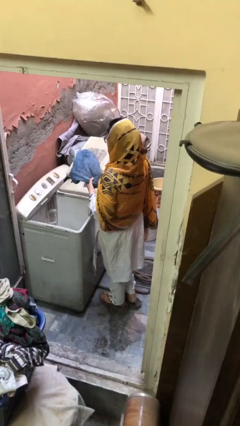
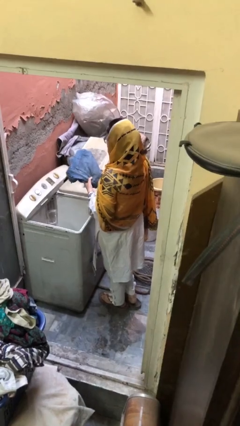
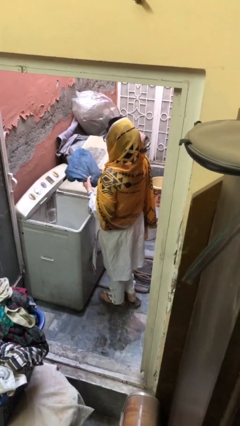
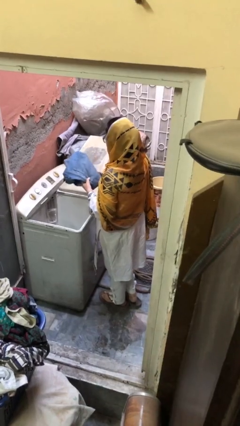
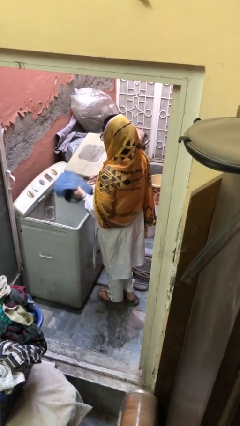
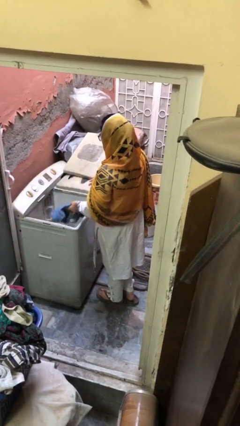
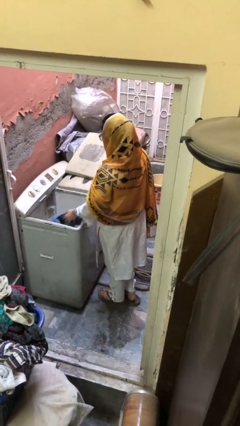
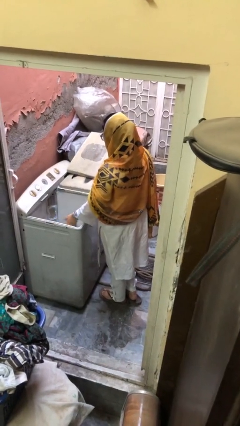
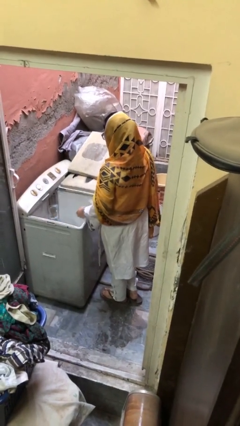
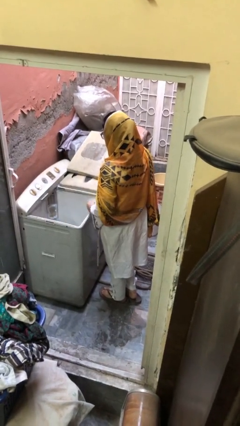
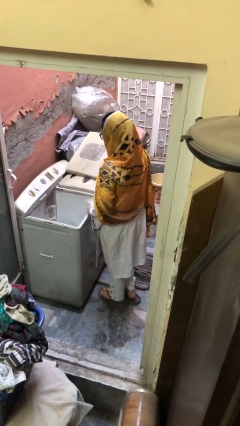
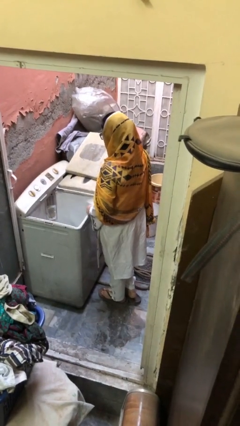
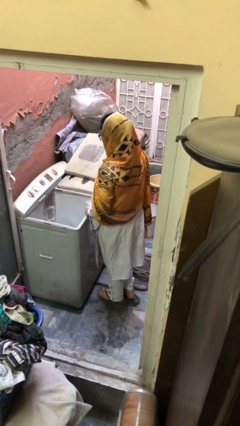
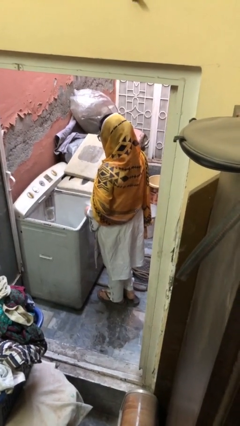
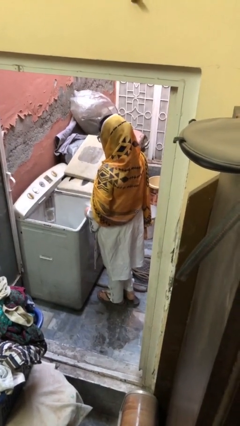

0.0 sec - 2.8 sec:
person loads clotheswasher

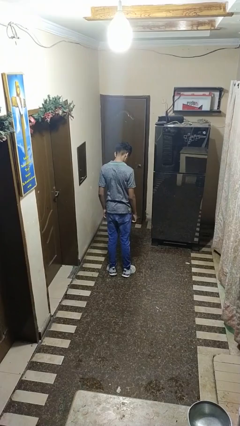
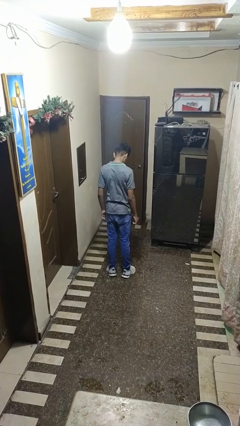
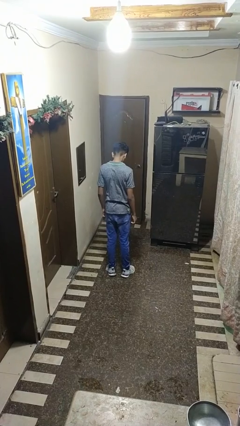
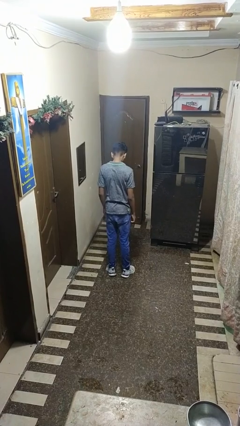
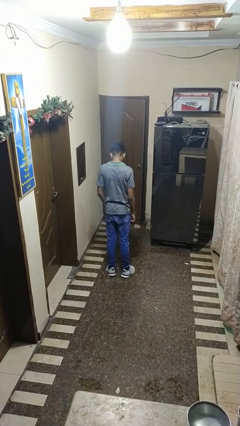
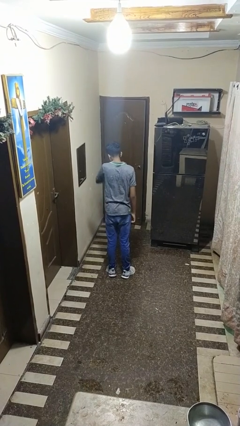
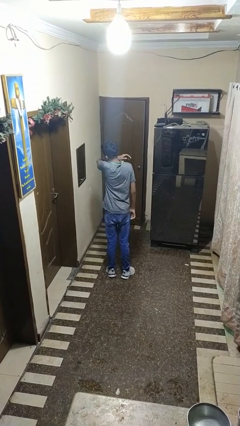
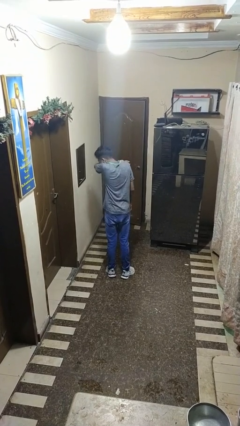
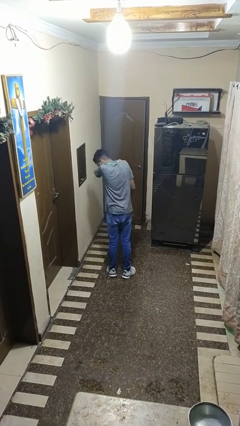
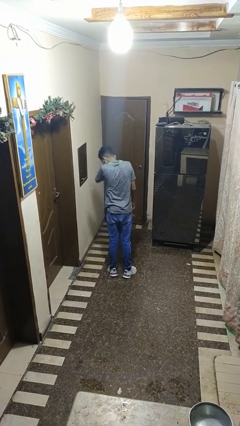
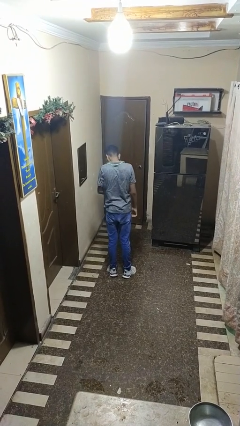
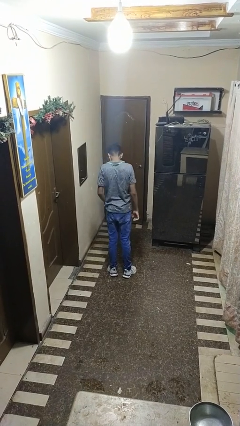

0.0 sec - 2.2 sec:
person sneezes into arm

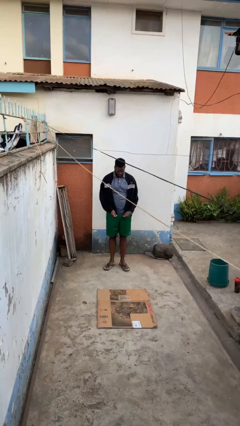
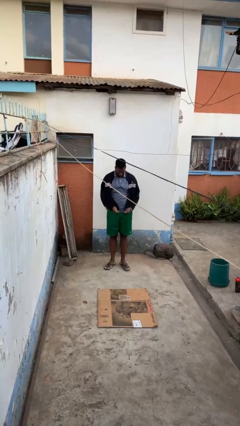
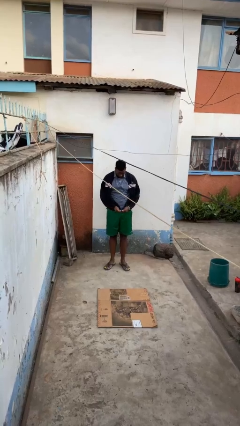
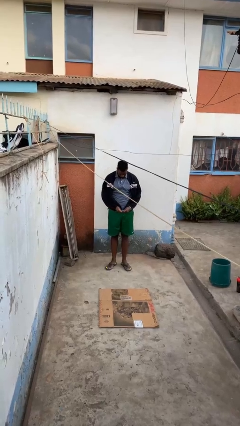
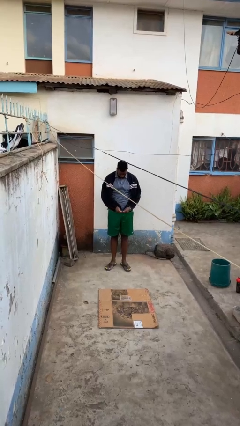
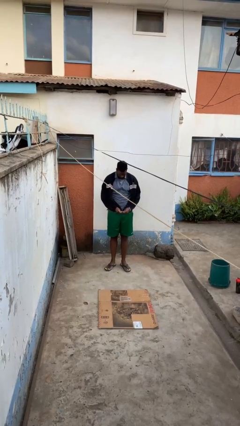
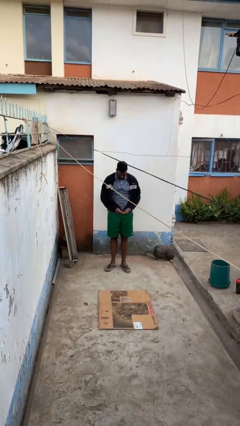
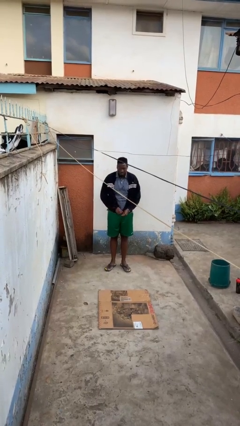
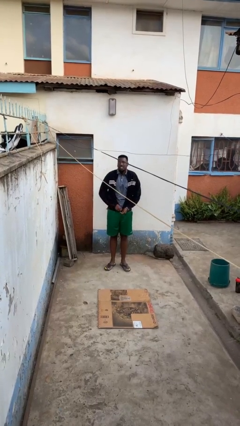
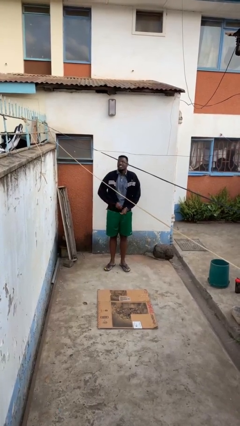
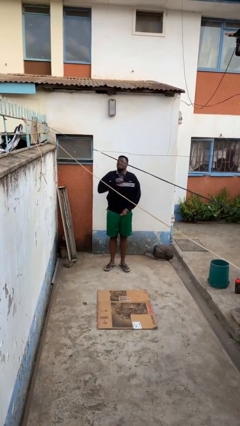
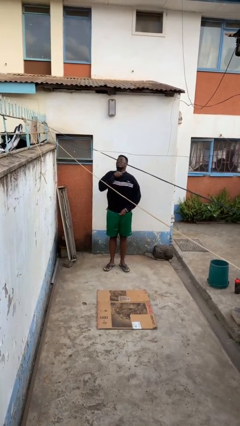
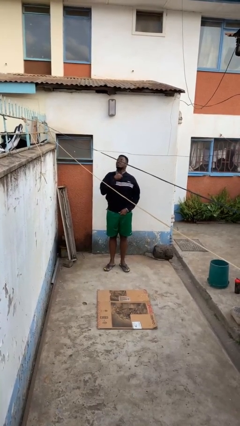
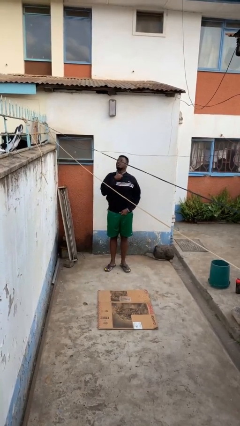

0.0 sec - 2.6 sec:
person zips up jacket

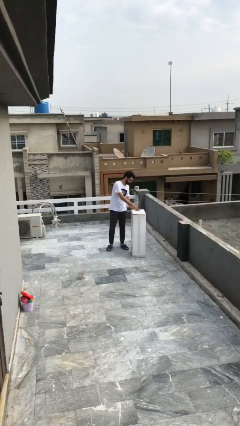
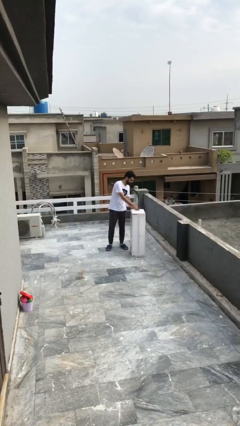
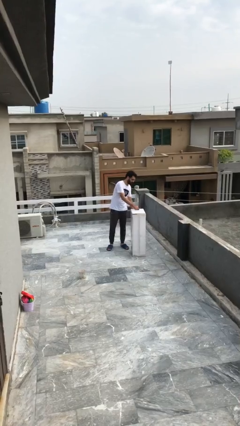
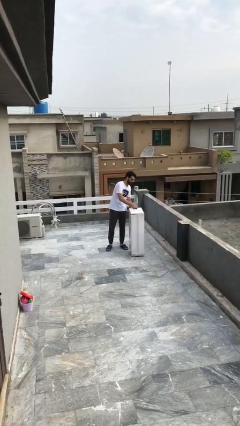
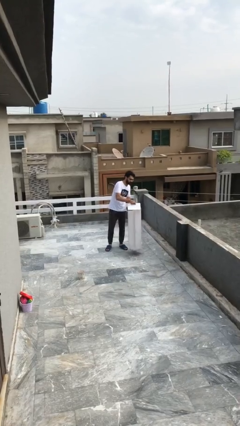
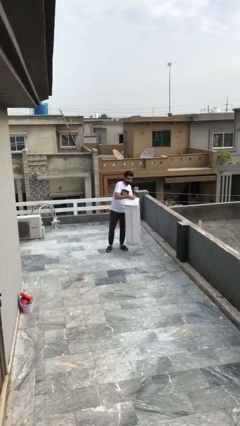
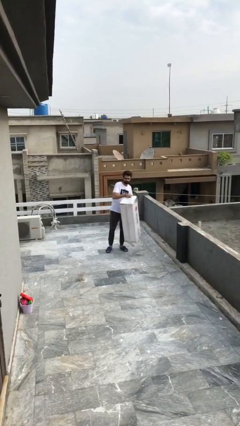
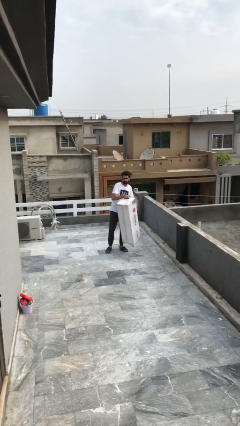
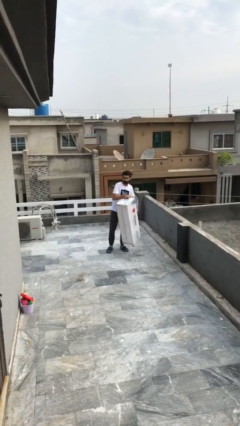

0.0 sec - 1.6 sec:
person picks up object from floor

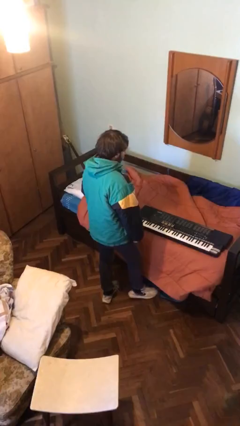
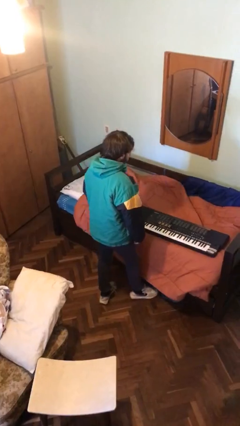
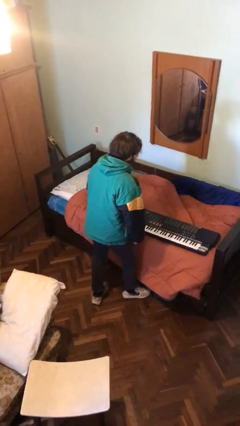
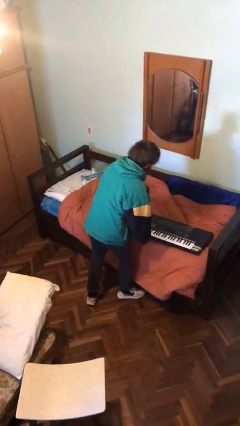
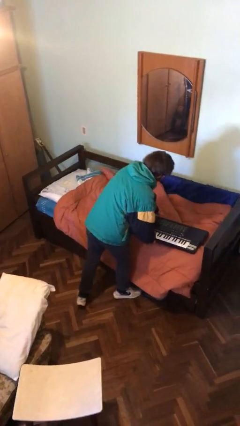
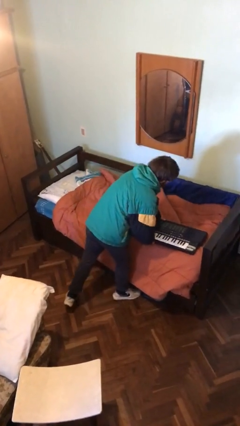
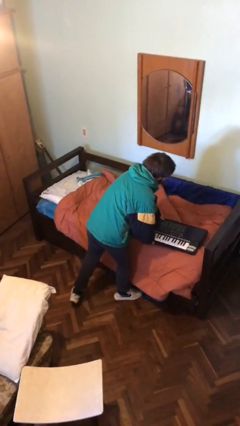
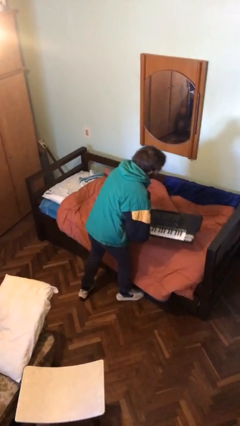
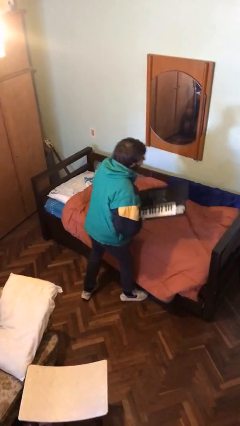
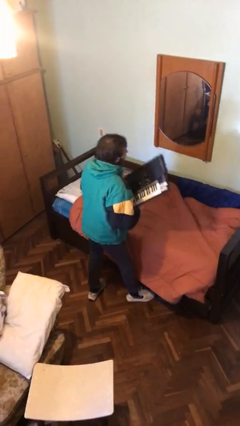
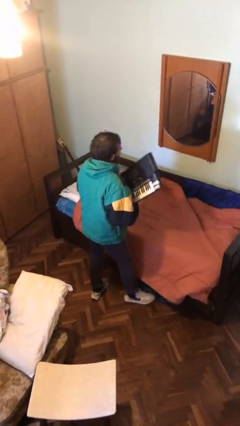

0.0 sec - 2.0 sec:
person picks up object from bed

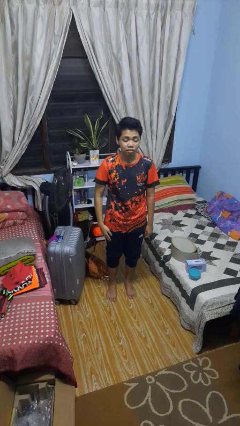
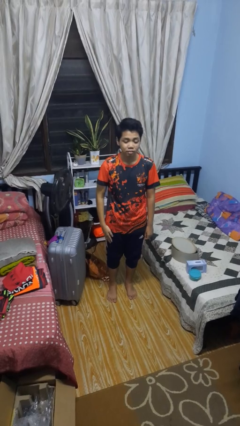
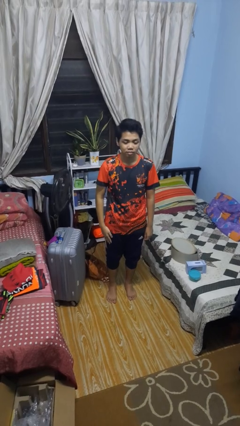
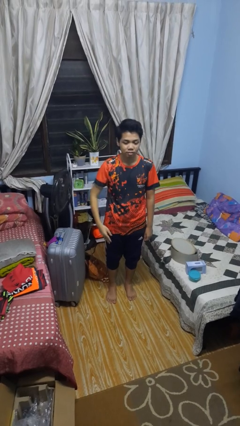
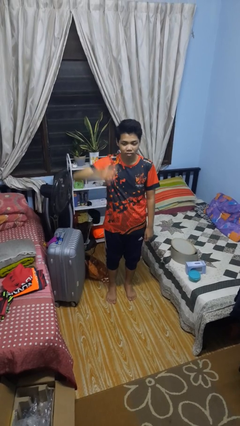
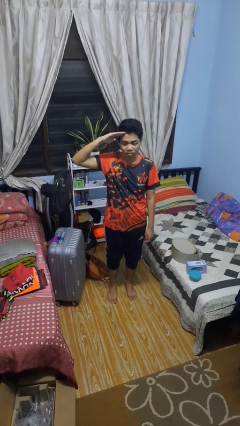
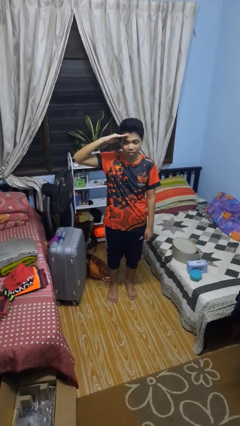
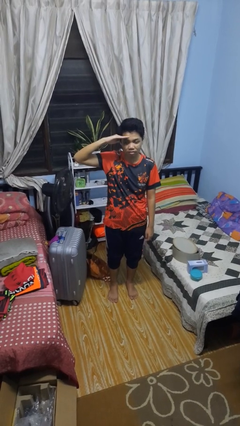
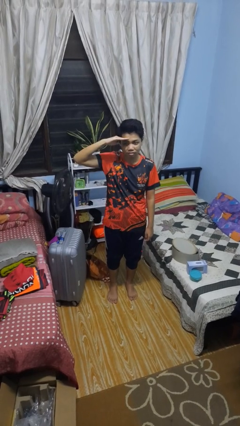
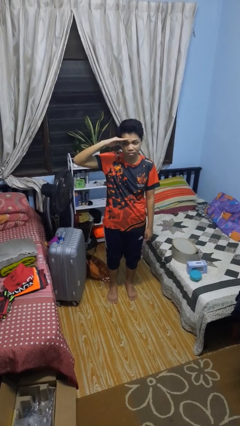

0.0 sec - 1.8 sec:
person salutes

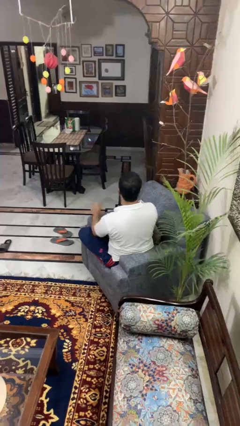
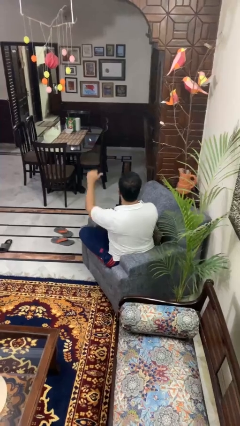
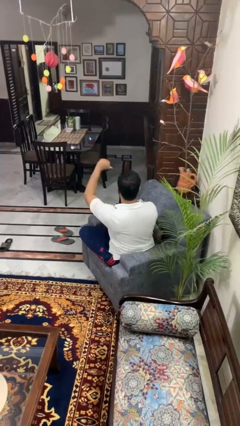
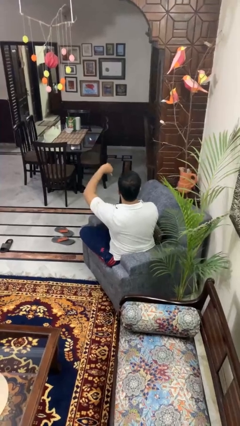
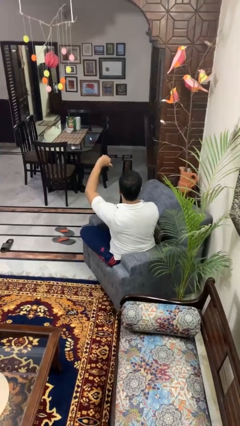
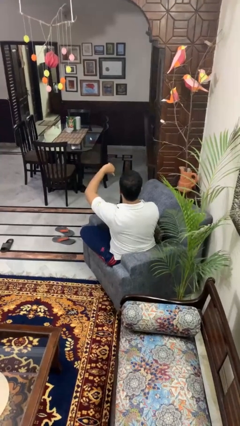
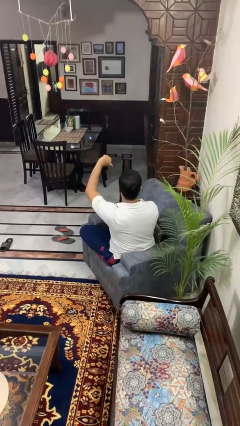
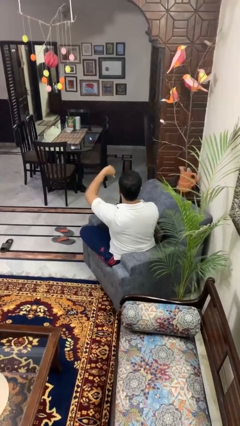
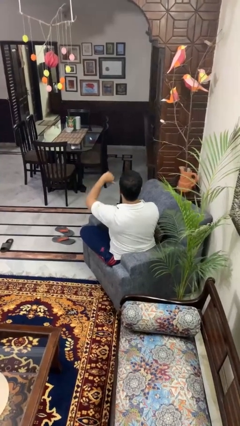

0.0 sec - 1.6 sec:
person gestures thumbs down

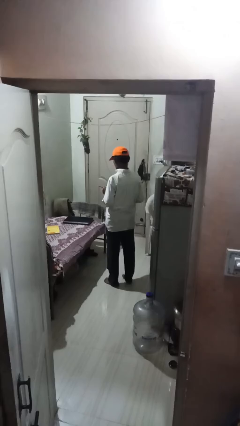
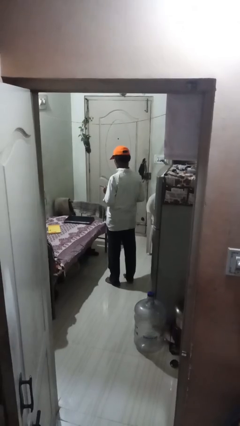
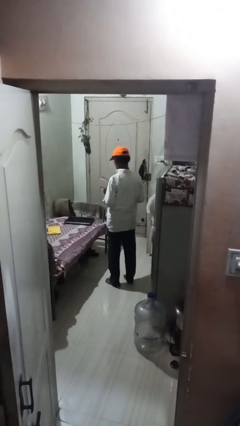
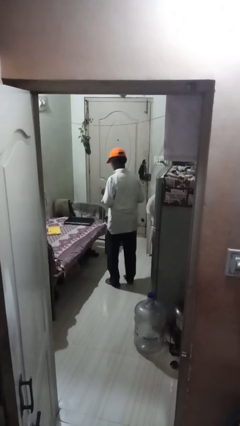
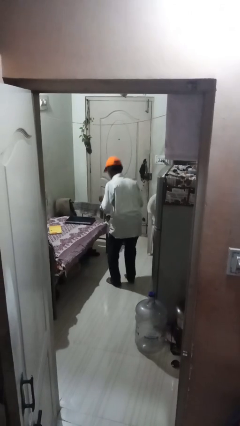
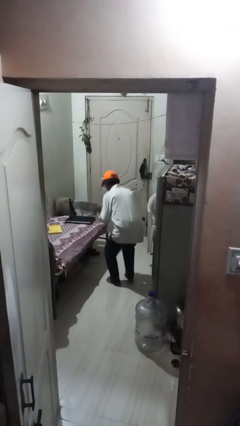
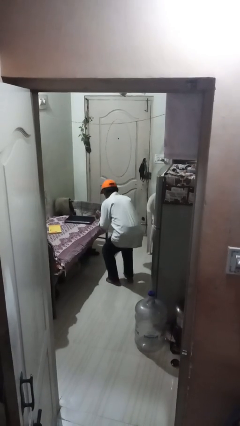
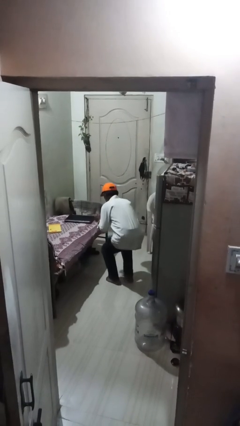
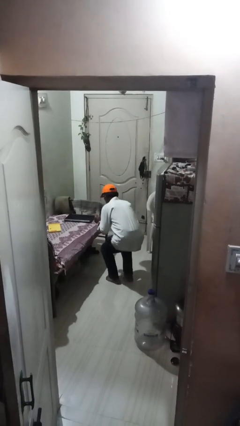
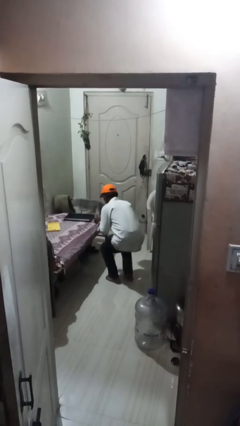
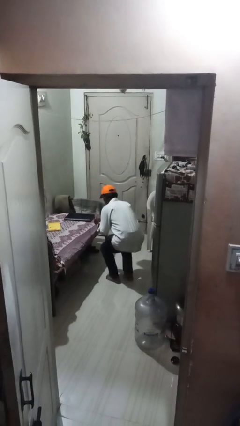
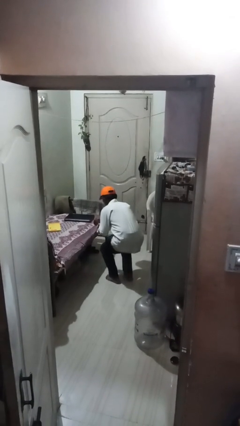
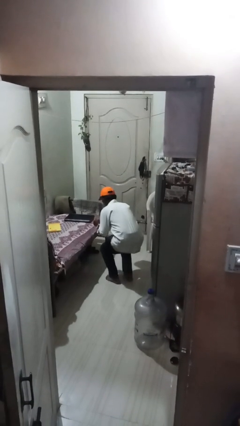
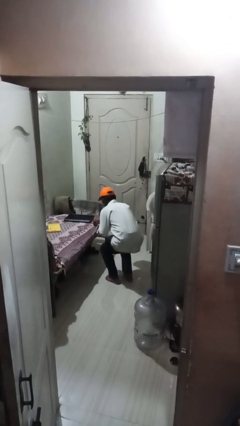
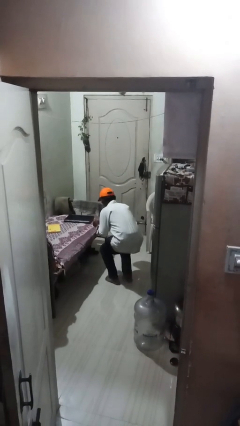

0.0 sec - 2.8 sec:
person squats
